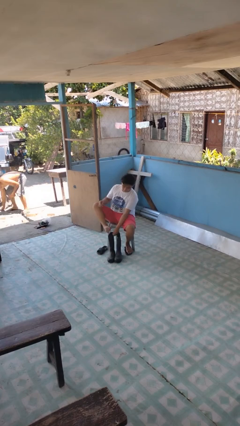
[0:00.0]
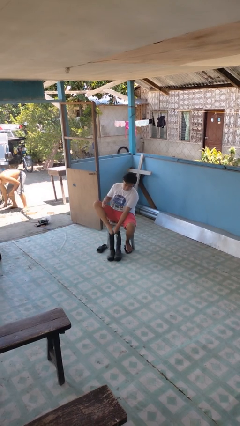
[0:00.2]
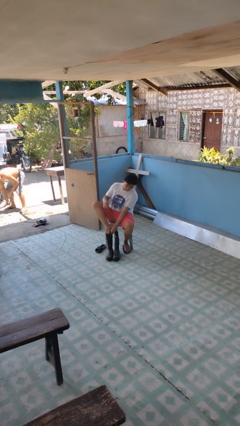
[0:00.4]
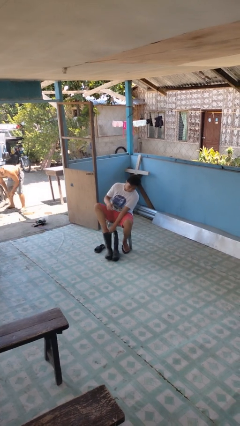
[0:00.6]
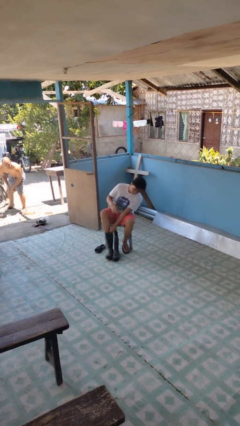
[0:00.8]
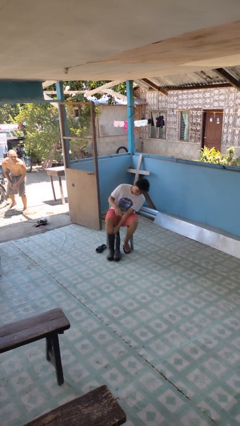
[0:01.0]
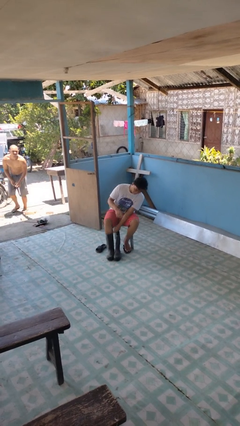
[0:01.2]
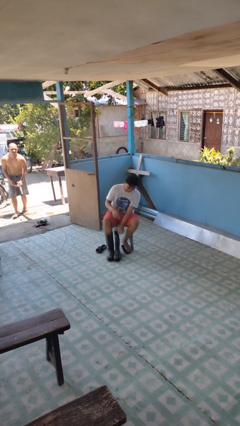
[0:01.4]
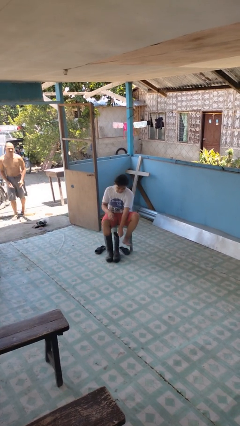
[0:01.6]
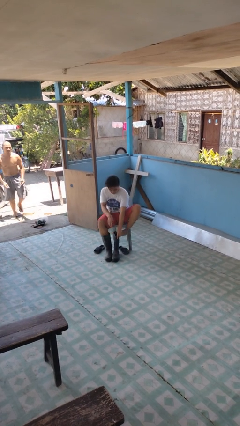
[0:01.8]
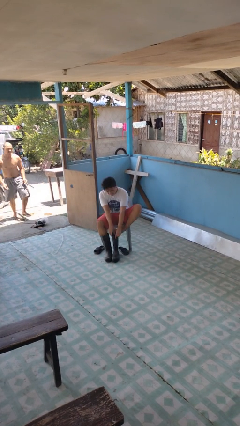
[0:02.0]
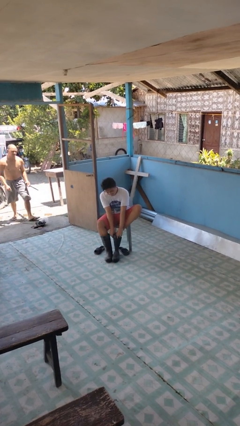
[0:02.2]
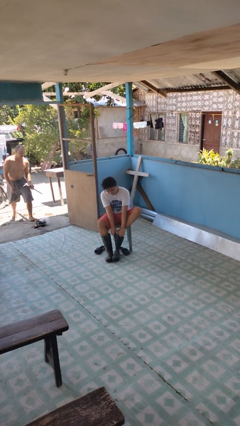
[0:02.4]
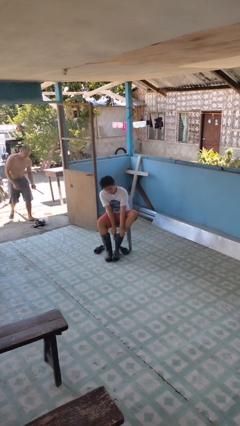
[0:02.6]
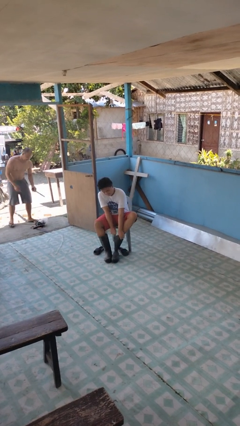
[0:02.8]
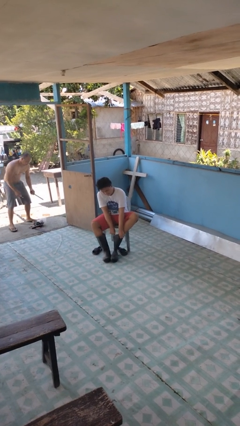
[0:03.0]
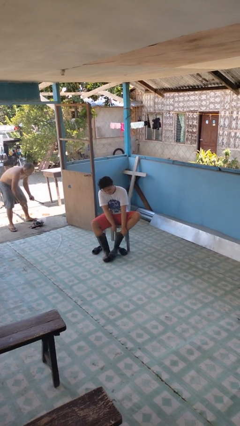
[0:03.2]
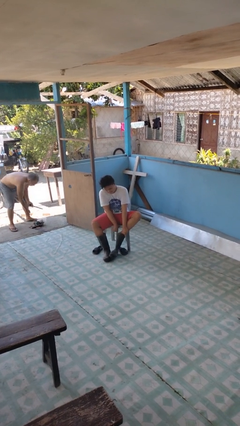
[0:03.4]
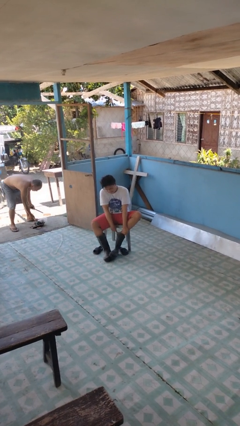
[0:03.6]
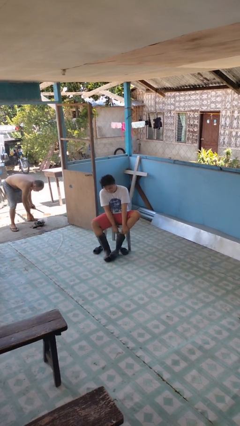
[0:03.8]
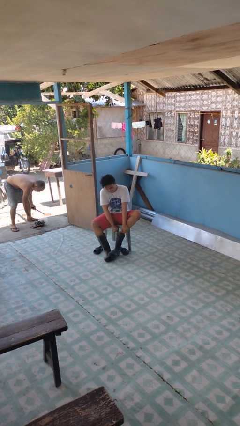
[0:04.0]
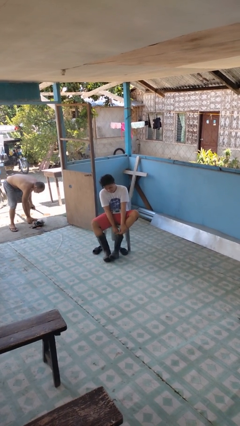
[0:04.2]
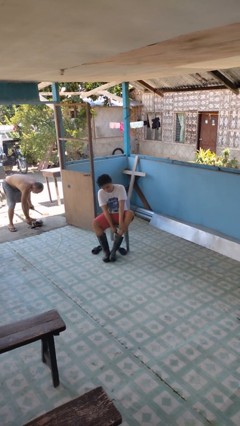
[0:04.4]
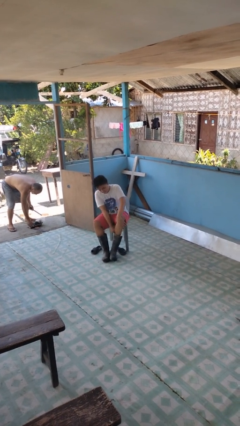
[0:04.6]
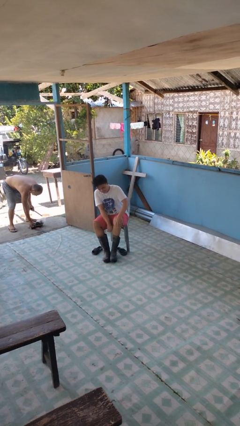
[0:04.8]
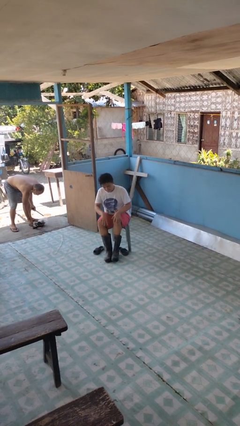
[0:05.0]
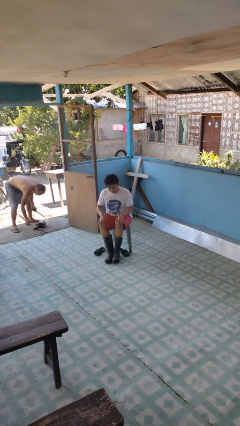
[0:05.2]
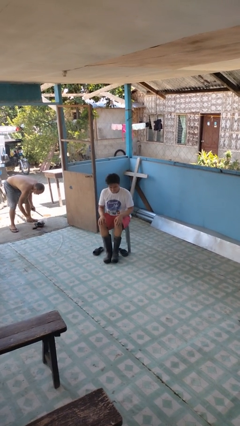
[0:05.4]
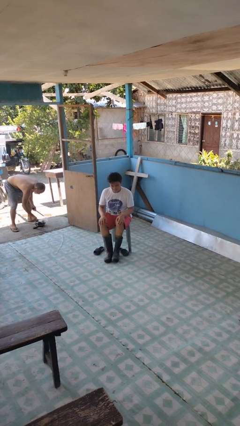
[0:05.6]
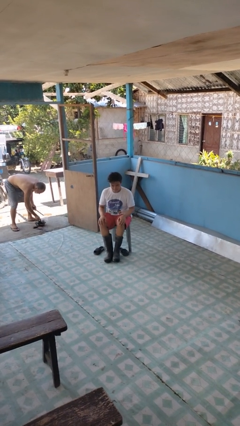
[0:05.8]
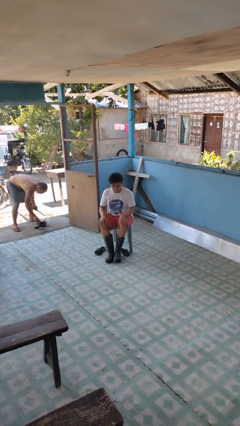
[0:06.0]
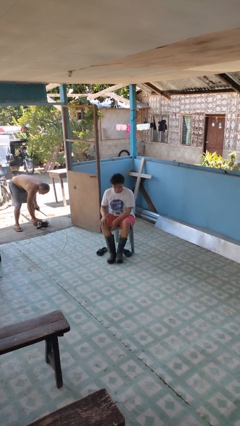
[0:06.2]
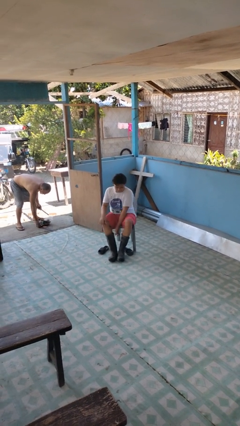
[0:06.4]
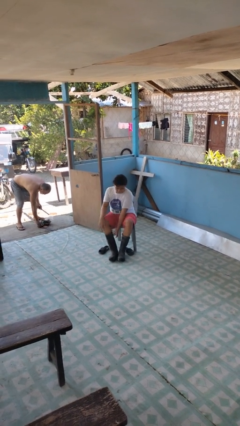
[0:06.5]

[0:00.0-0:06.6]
person puts on boots

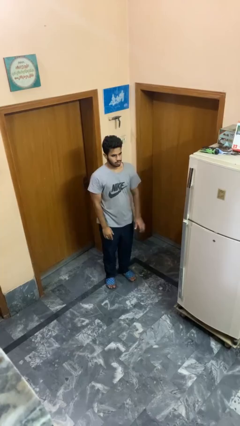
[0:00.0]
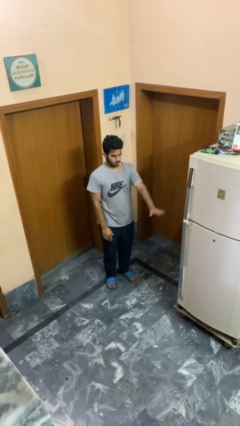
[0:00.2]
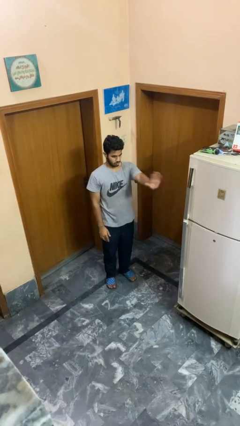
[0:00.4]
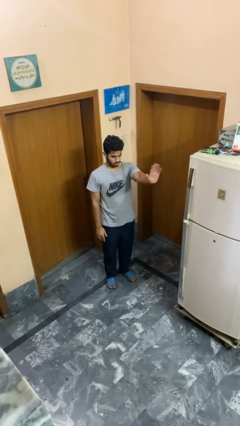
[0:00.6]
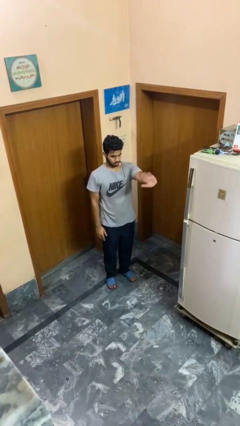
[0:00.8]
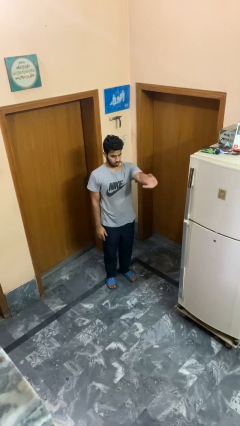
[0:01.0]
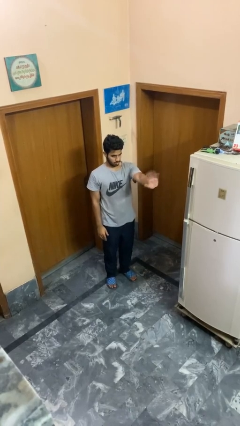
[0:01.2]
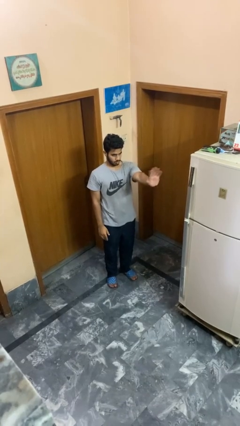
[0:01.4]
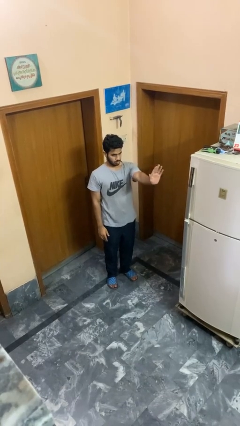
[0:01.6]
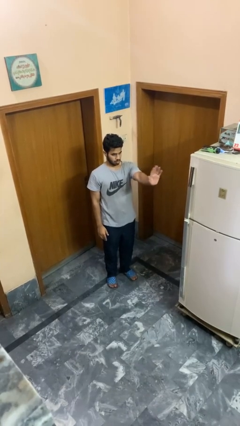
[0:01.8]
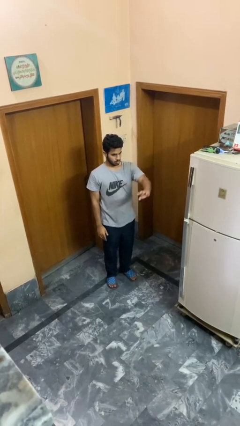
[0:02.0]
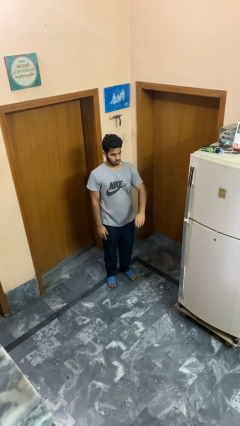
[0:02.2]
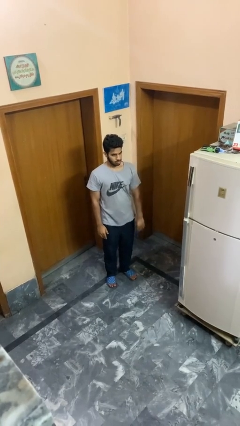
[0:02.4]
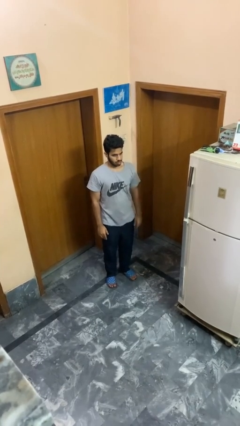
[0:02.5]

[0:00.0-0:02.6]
person waves at person

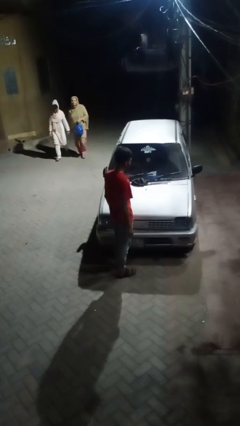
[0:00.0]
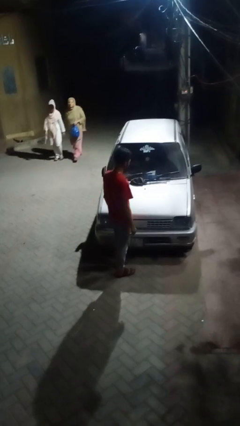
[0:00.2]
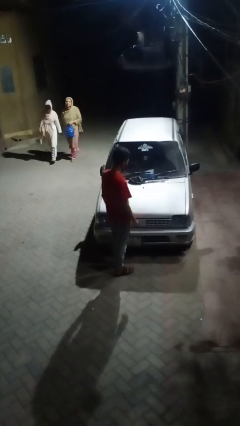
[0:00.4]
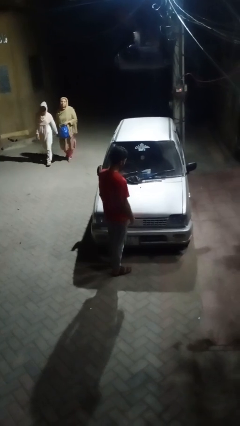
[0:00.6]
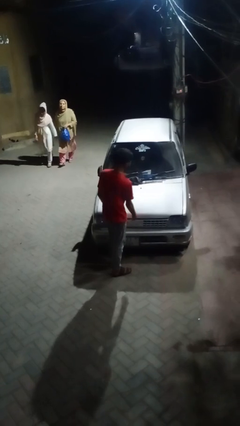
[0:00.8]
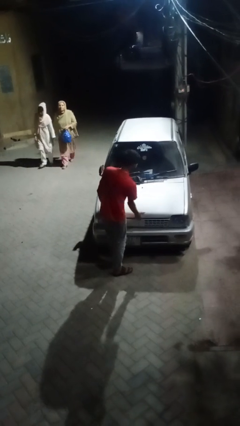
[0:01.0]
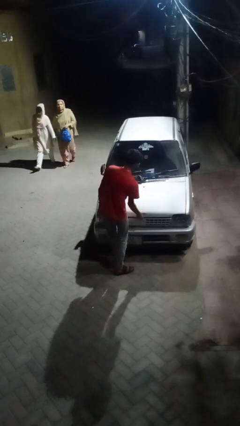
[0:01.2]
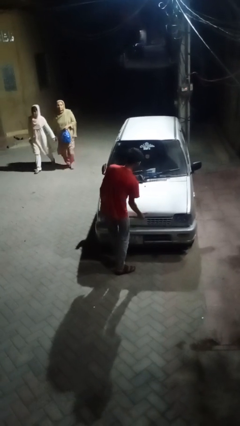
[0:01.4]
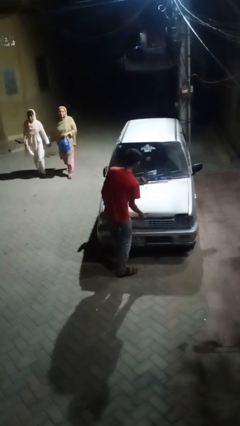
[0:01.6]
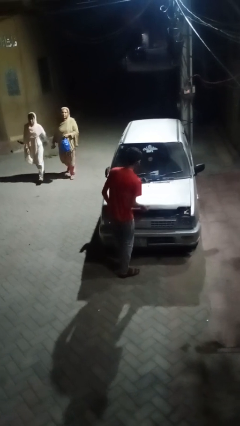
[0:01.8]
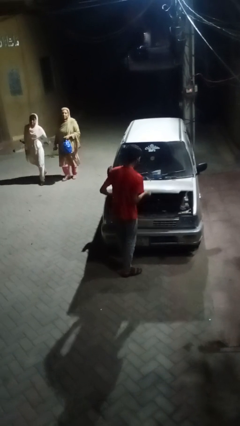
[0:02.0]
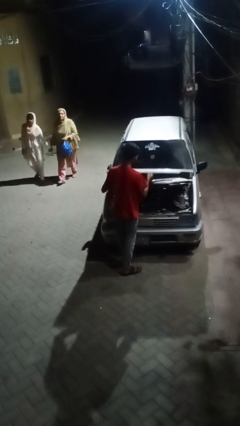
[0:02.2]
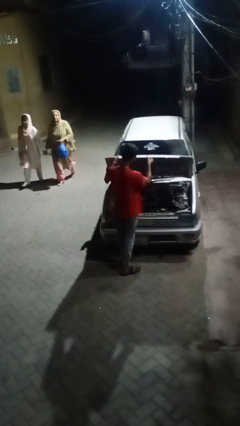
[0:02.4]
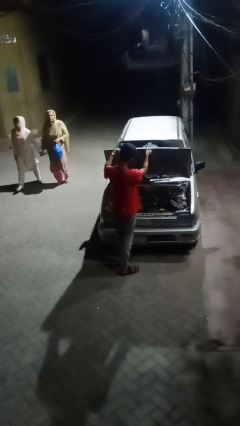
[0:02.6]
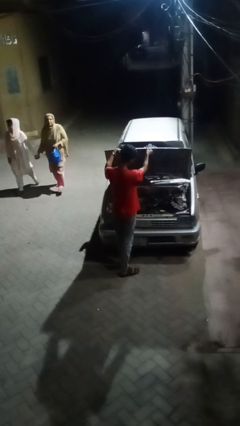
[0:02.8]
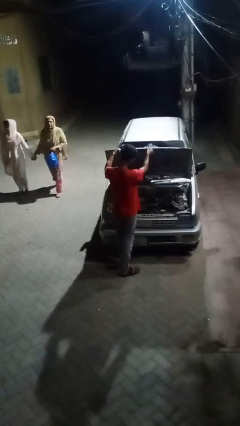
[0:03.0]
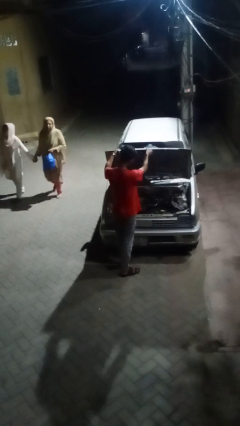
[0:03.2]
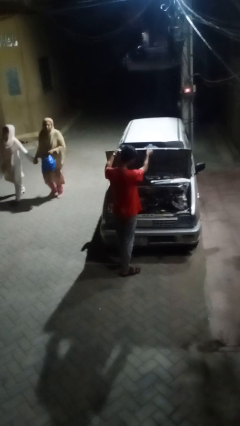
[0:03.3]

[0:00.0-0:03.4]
person opens car hood

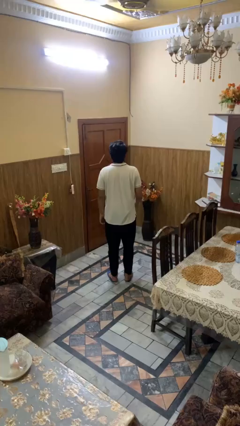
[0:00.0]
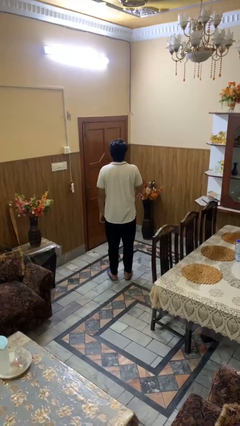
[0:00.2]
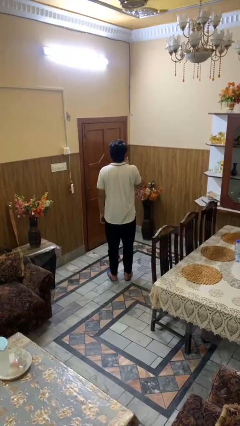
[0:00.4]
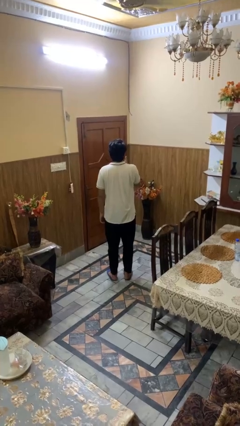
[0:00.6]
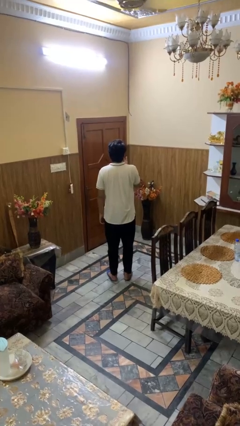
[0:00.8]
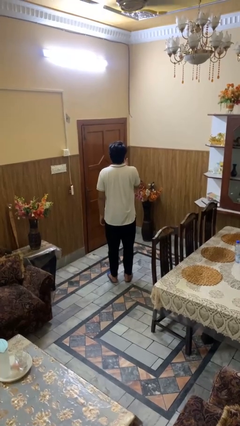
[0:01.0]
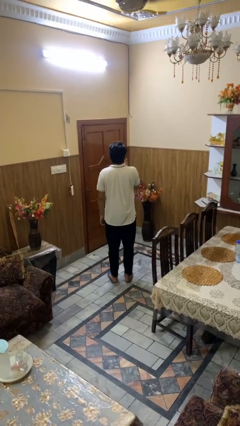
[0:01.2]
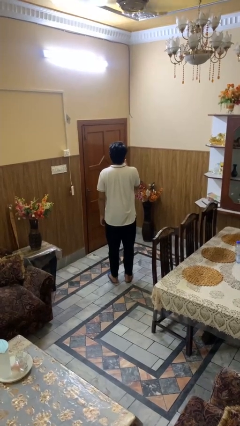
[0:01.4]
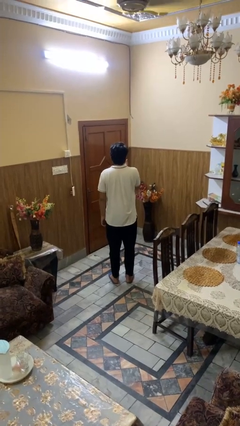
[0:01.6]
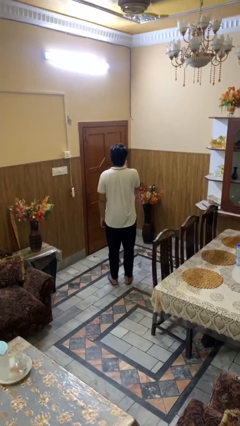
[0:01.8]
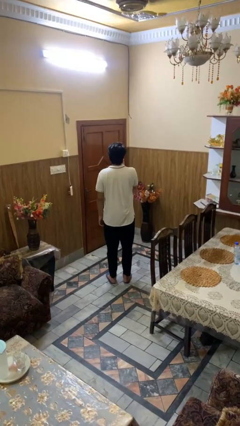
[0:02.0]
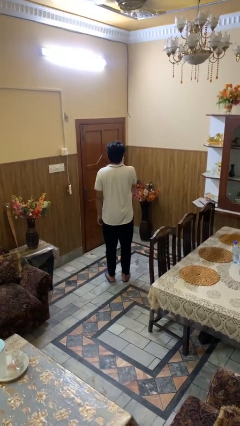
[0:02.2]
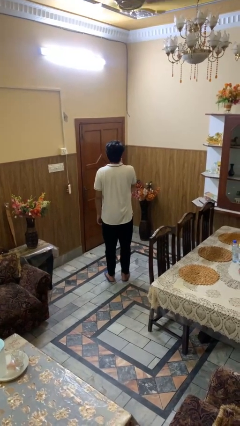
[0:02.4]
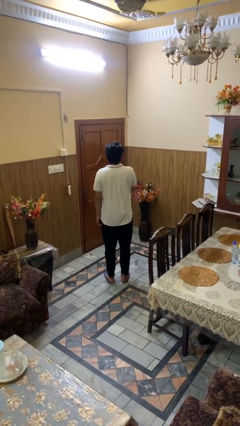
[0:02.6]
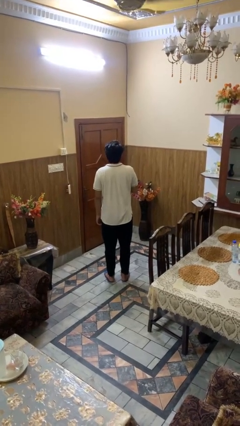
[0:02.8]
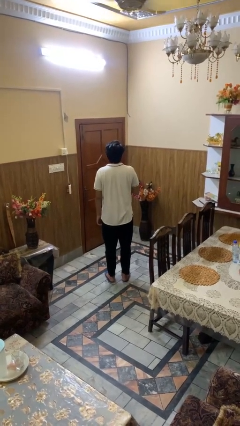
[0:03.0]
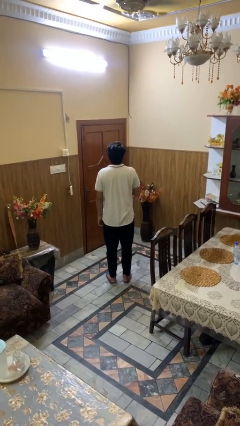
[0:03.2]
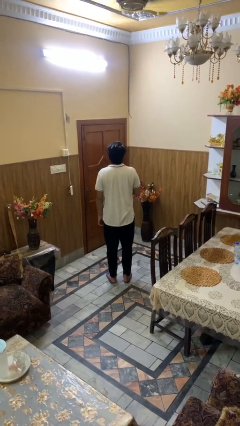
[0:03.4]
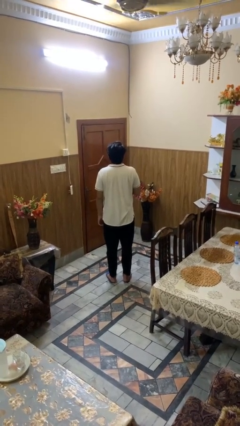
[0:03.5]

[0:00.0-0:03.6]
person licks fingers

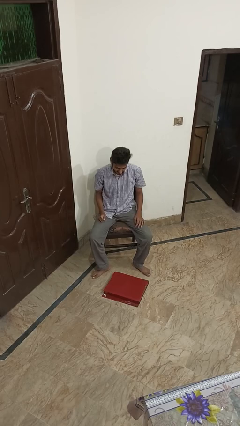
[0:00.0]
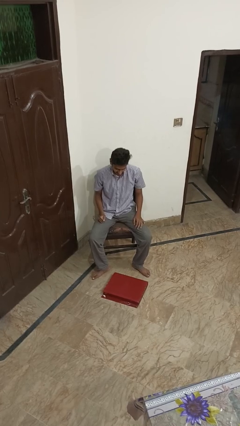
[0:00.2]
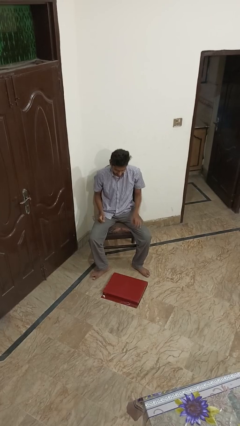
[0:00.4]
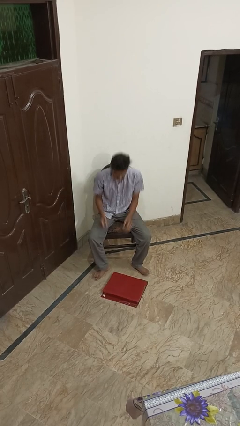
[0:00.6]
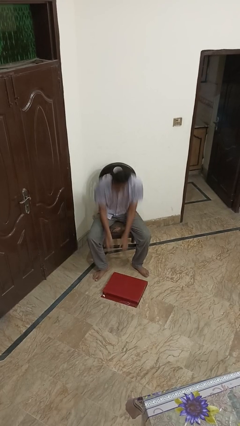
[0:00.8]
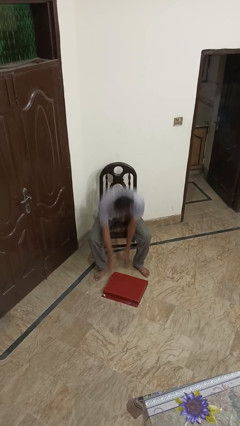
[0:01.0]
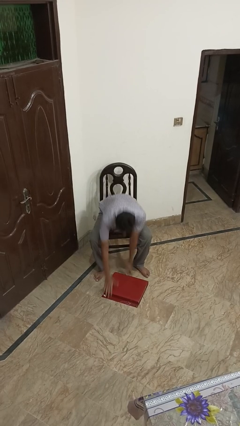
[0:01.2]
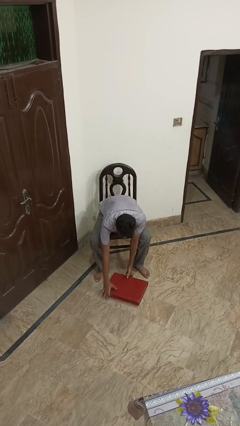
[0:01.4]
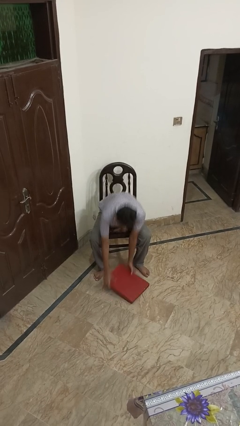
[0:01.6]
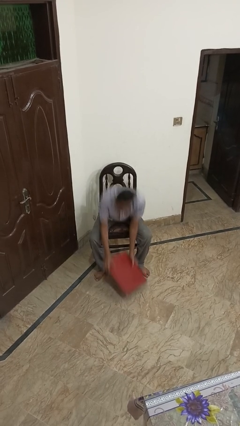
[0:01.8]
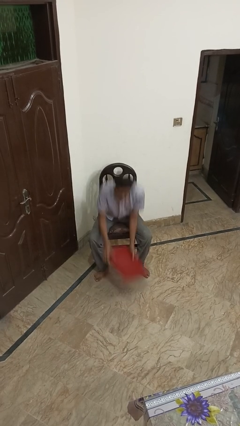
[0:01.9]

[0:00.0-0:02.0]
person picks up object from floor
